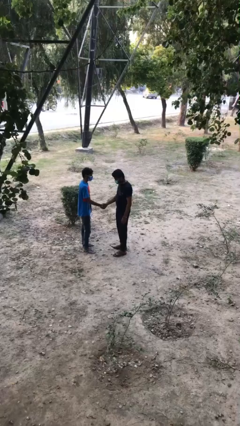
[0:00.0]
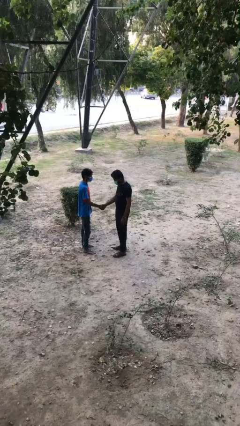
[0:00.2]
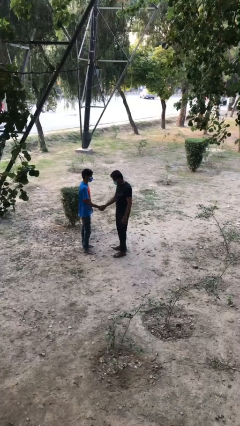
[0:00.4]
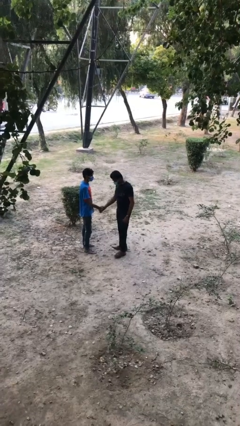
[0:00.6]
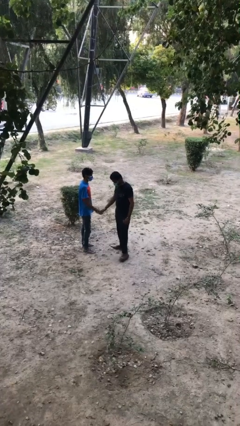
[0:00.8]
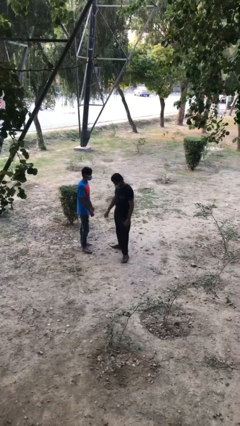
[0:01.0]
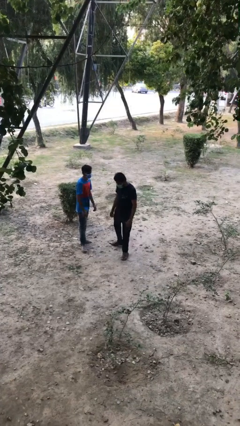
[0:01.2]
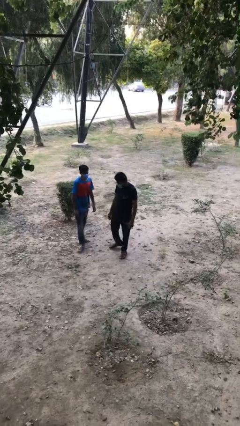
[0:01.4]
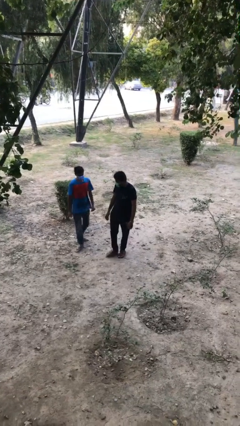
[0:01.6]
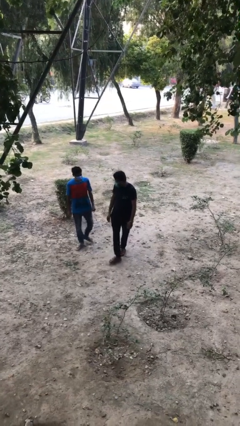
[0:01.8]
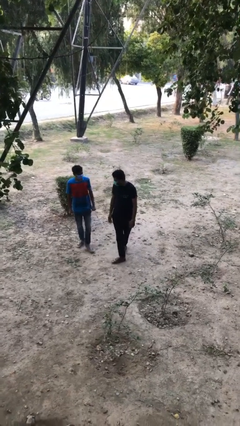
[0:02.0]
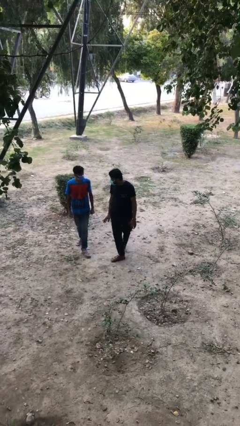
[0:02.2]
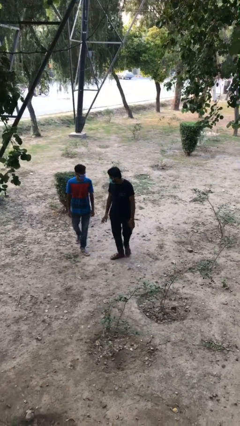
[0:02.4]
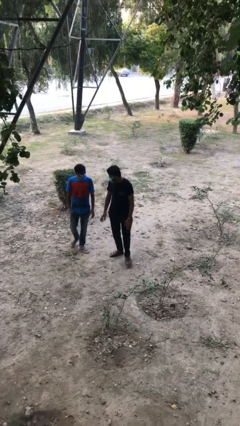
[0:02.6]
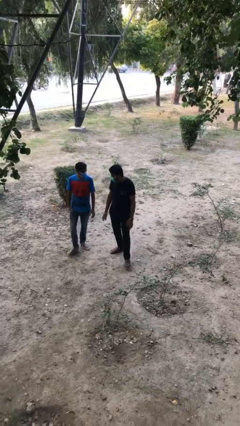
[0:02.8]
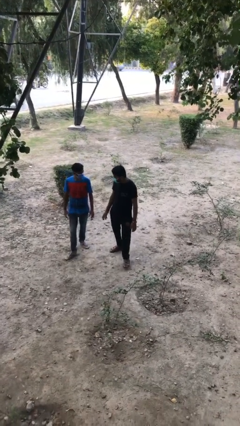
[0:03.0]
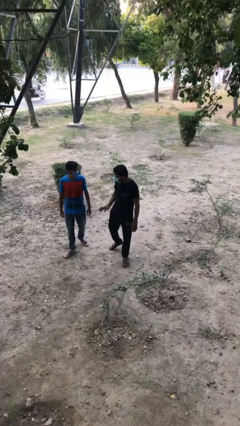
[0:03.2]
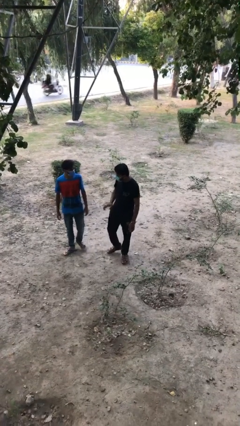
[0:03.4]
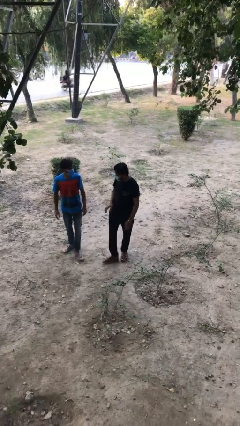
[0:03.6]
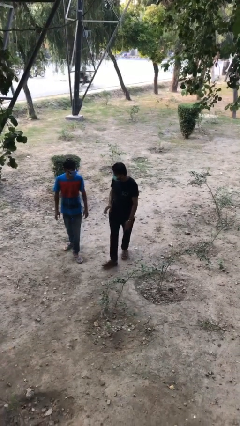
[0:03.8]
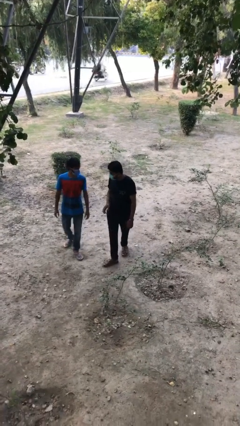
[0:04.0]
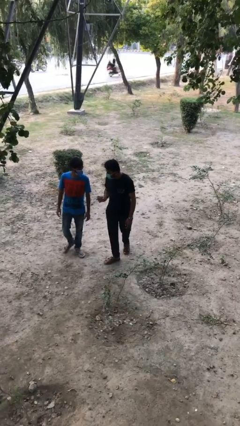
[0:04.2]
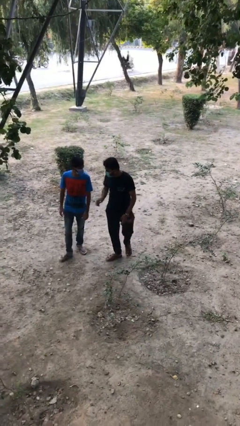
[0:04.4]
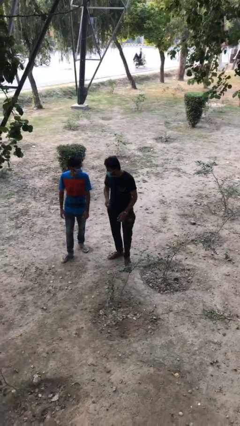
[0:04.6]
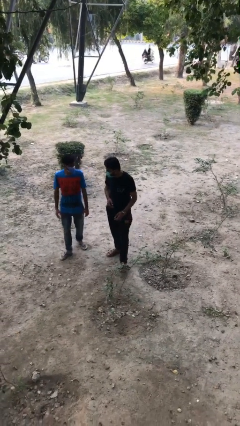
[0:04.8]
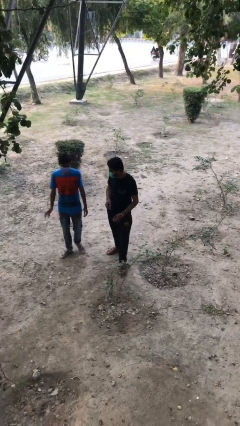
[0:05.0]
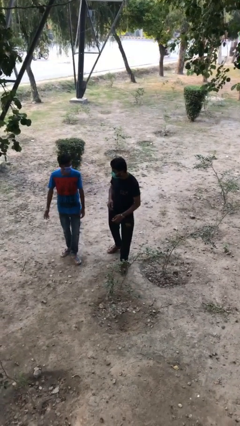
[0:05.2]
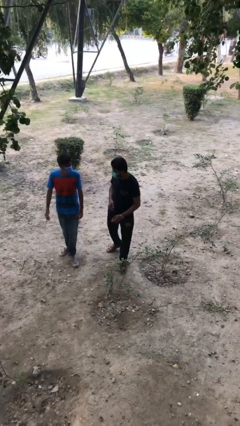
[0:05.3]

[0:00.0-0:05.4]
person talks to person

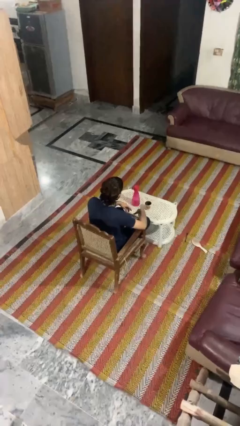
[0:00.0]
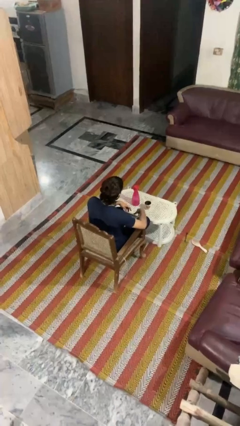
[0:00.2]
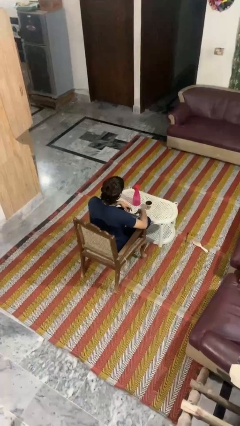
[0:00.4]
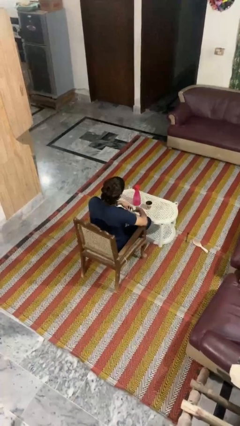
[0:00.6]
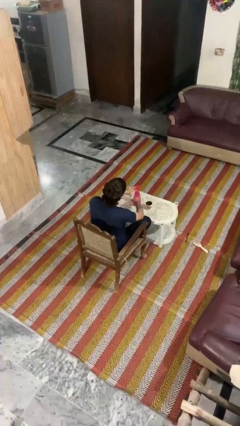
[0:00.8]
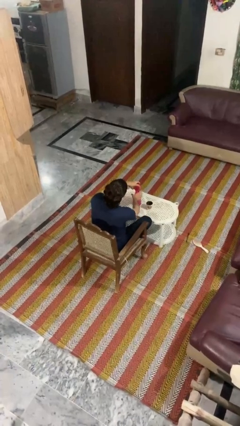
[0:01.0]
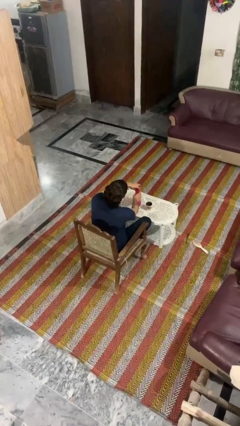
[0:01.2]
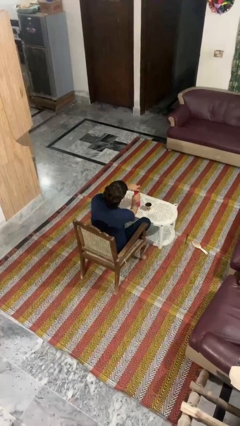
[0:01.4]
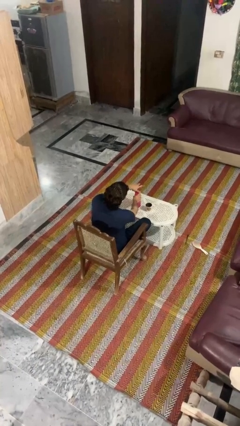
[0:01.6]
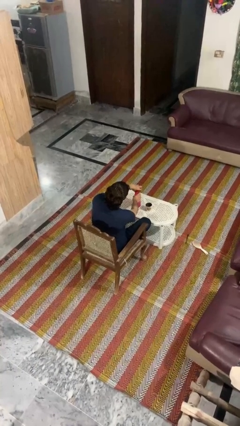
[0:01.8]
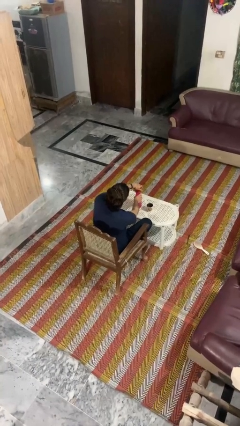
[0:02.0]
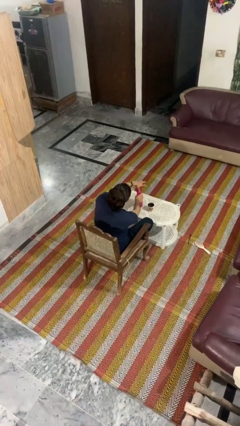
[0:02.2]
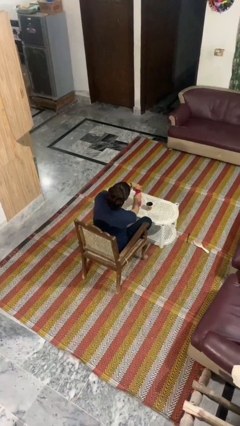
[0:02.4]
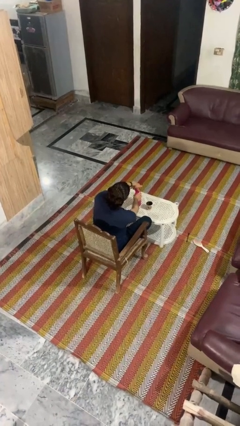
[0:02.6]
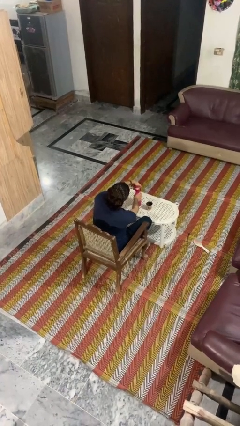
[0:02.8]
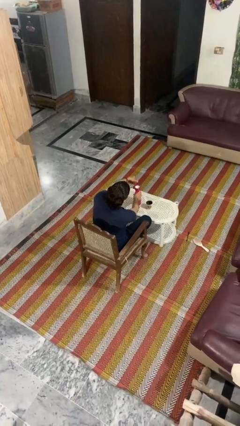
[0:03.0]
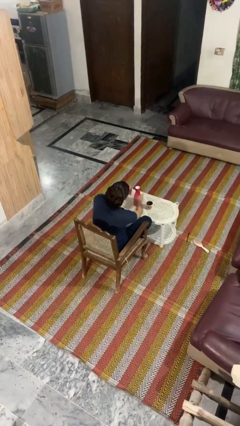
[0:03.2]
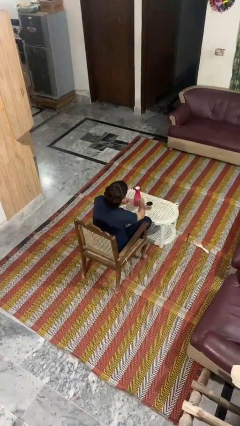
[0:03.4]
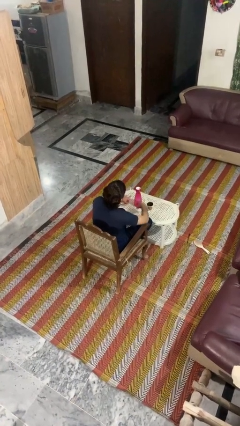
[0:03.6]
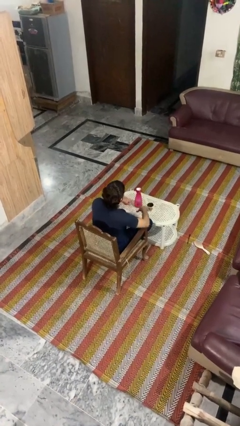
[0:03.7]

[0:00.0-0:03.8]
person unscrews lid from bottle

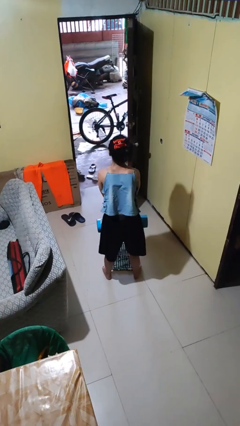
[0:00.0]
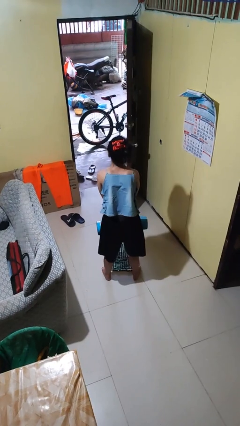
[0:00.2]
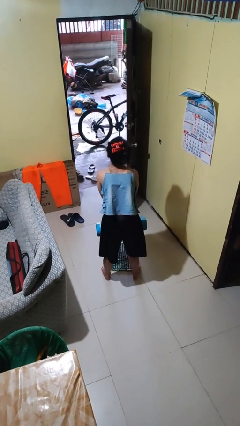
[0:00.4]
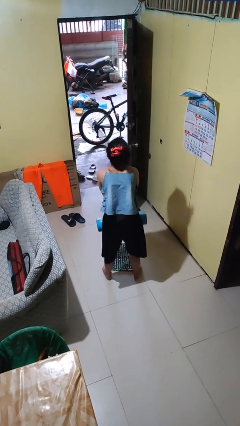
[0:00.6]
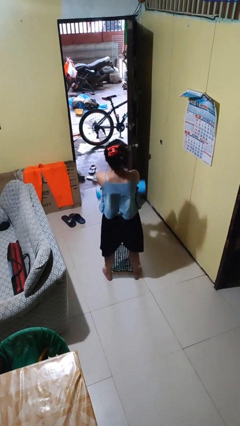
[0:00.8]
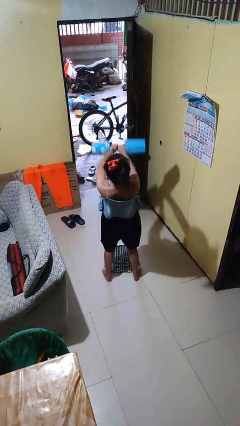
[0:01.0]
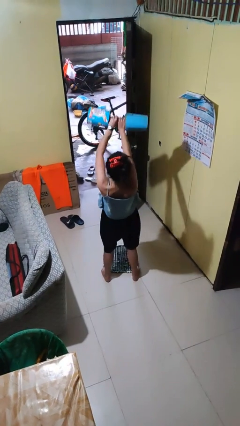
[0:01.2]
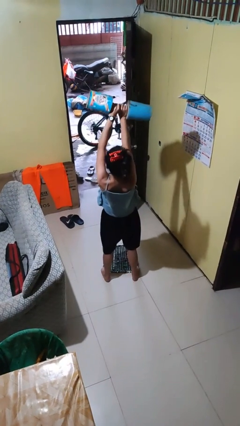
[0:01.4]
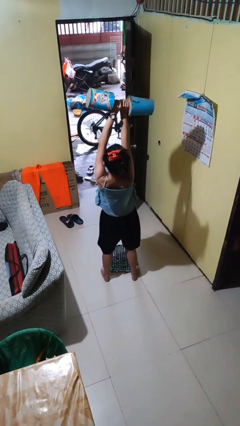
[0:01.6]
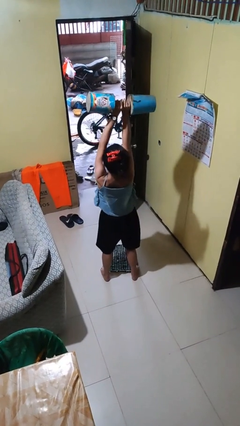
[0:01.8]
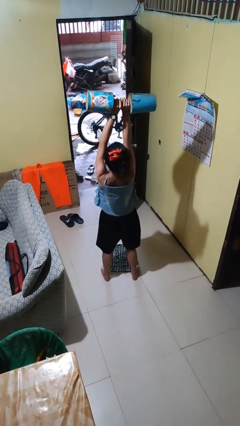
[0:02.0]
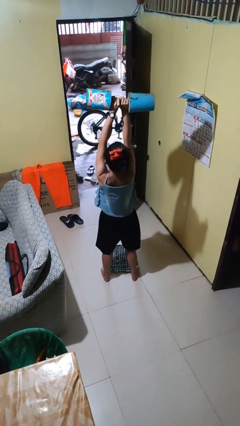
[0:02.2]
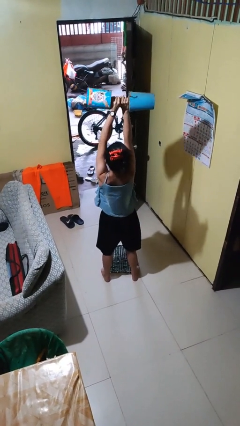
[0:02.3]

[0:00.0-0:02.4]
person lifts dumbbells

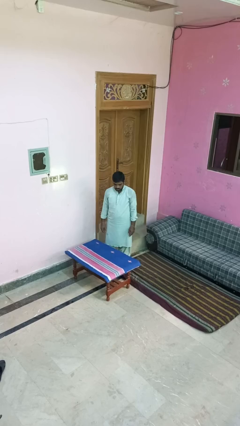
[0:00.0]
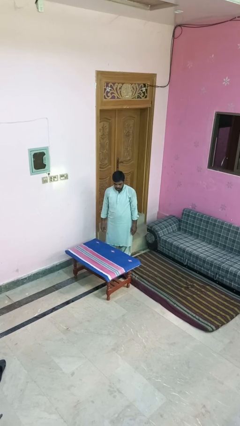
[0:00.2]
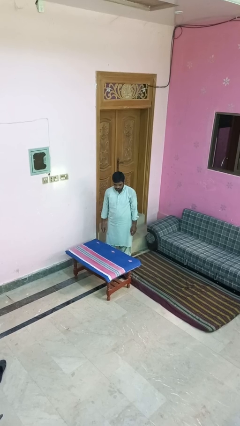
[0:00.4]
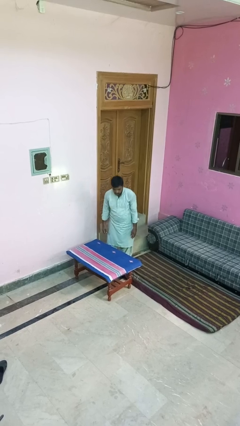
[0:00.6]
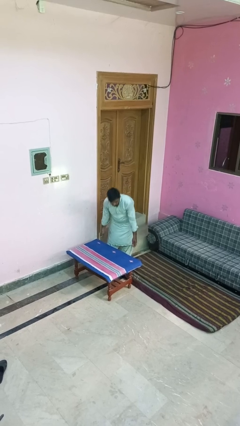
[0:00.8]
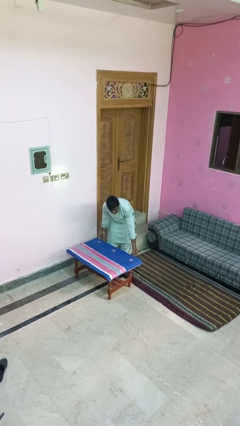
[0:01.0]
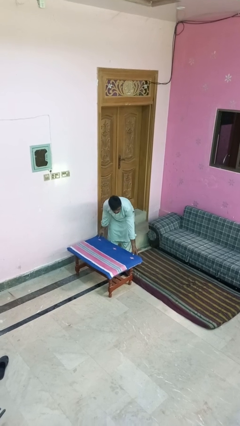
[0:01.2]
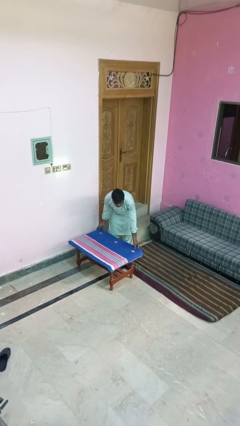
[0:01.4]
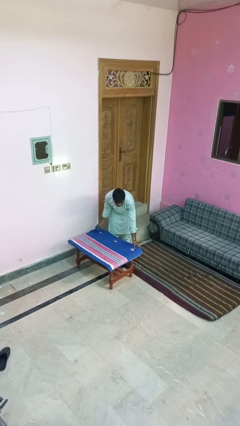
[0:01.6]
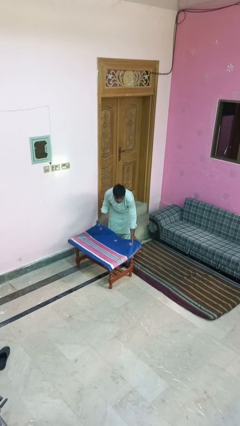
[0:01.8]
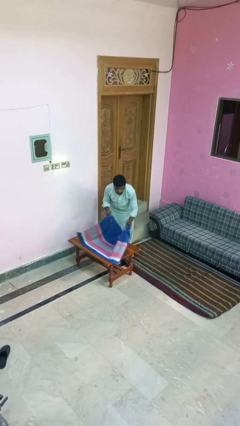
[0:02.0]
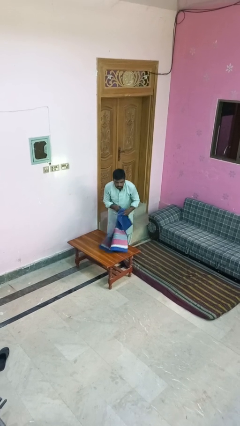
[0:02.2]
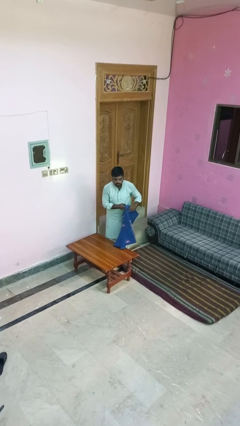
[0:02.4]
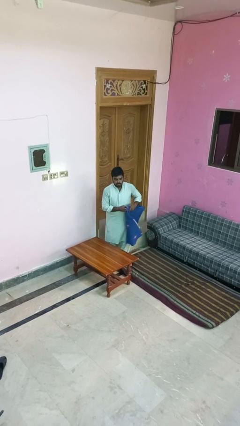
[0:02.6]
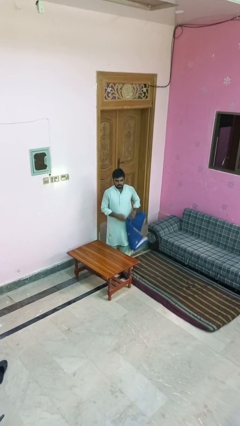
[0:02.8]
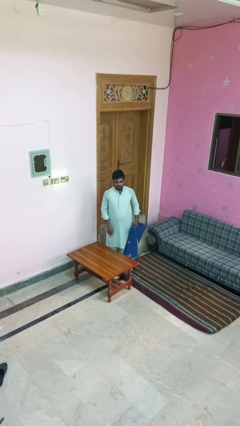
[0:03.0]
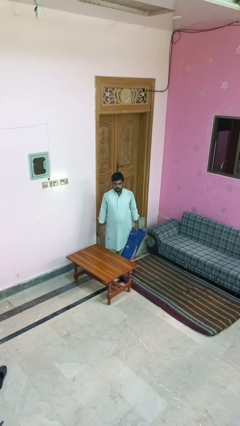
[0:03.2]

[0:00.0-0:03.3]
person folds tablecloth

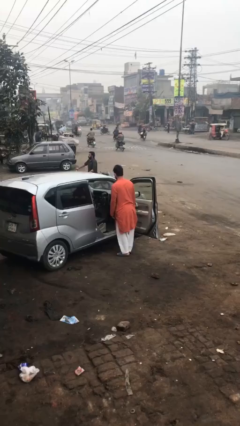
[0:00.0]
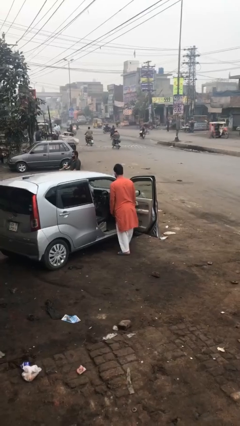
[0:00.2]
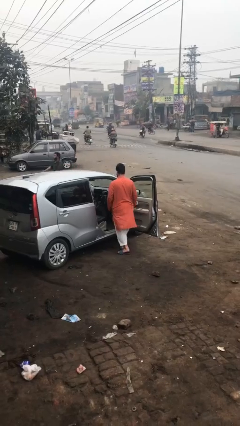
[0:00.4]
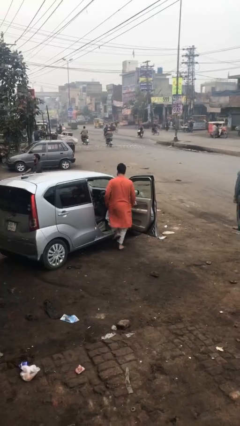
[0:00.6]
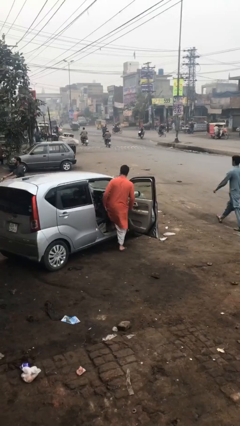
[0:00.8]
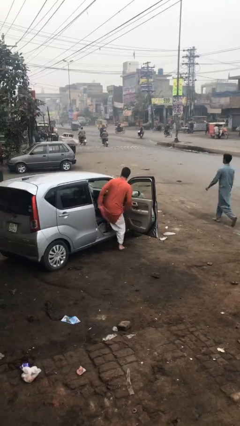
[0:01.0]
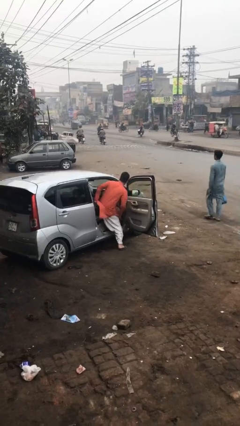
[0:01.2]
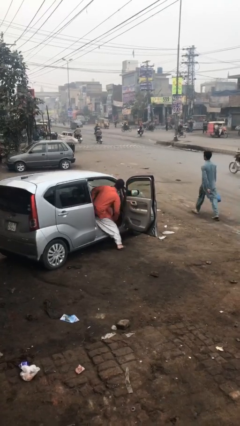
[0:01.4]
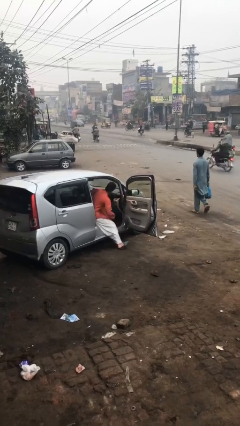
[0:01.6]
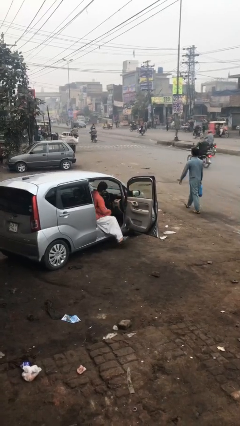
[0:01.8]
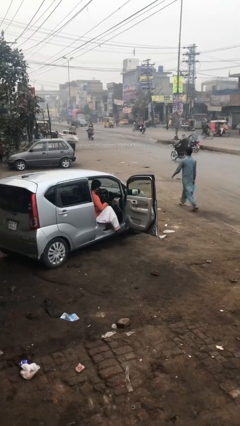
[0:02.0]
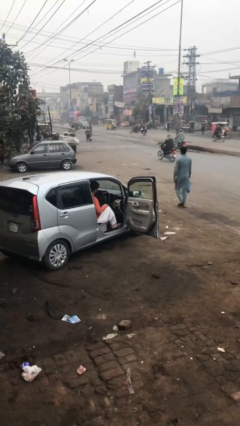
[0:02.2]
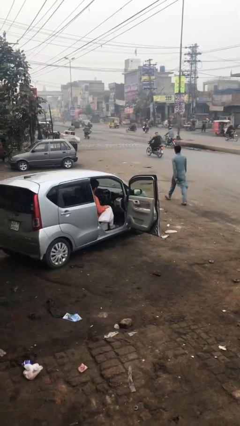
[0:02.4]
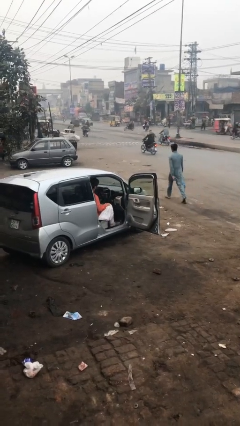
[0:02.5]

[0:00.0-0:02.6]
person enters car

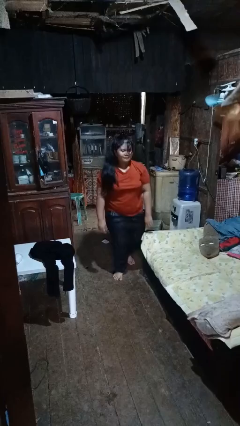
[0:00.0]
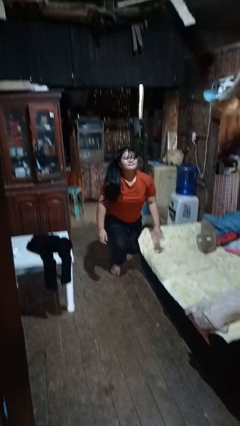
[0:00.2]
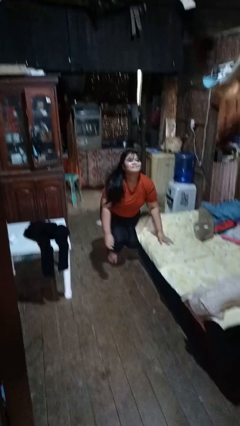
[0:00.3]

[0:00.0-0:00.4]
person trips on object on floor
